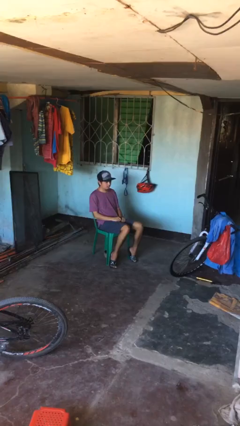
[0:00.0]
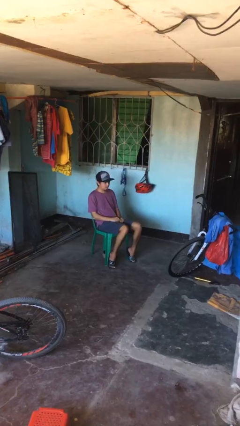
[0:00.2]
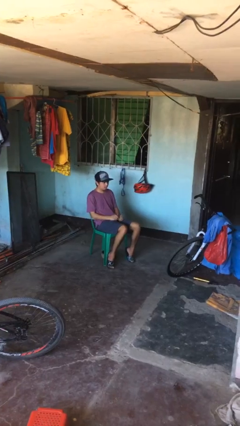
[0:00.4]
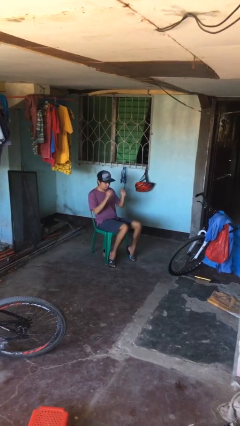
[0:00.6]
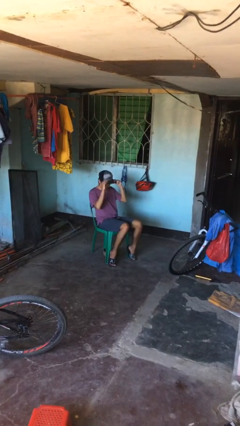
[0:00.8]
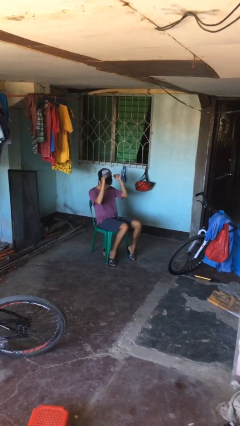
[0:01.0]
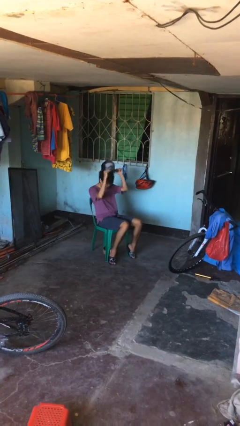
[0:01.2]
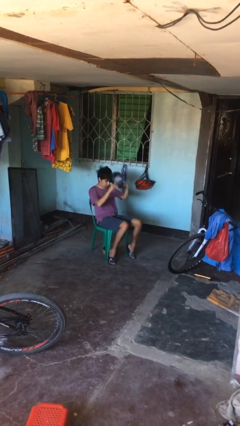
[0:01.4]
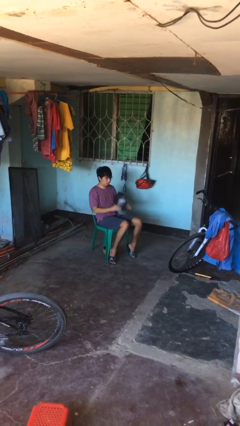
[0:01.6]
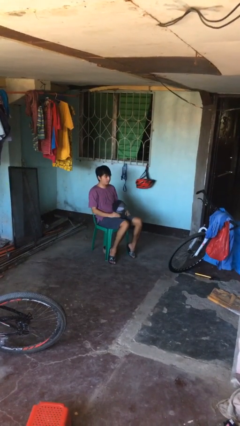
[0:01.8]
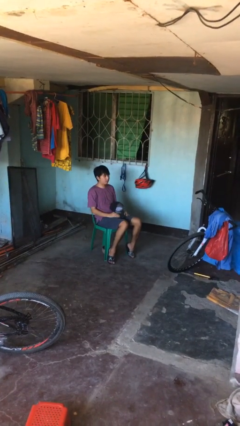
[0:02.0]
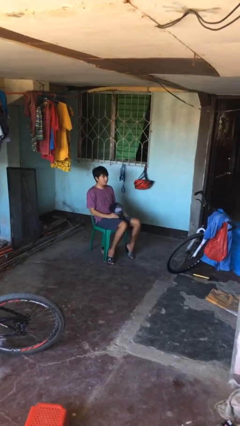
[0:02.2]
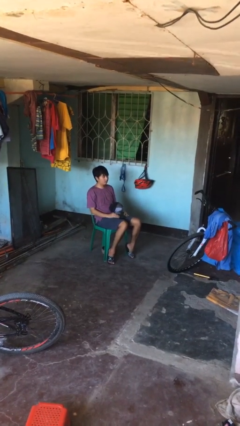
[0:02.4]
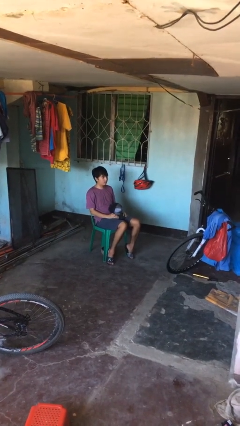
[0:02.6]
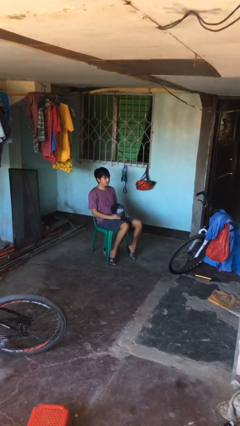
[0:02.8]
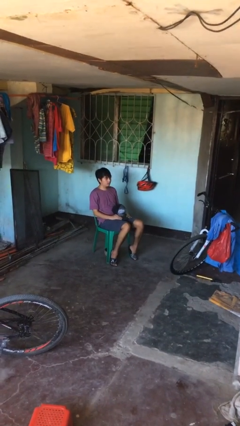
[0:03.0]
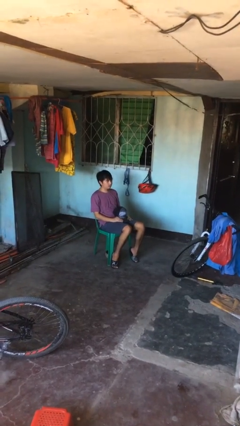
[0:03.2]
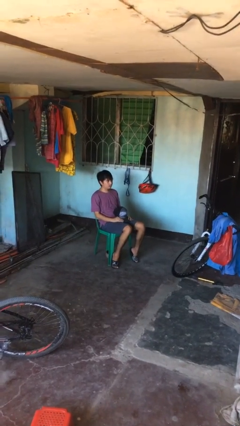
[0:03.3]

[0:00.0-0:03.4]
person takes off hat

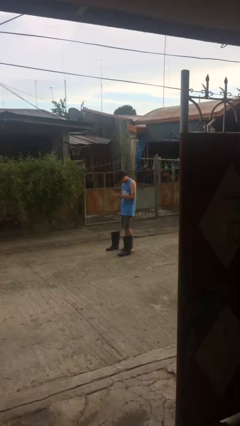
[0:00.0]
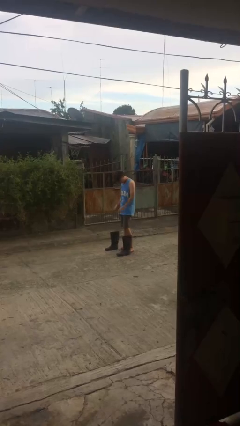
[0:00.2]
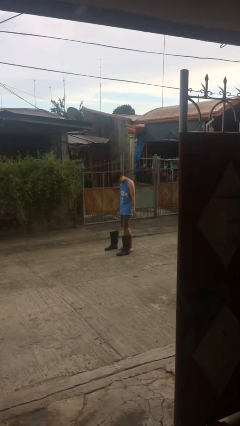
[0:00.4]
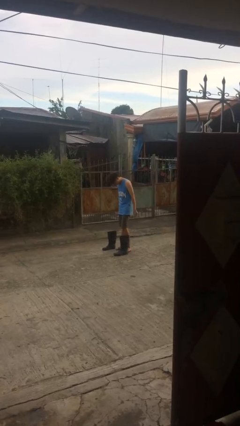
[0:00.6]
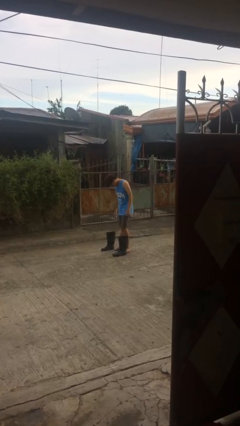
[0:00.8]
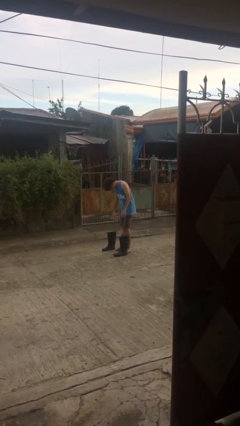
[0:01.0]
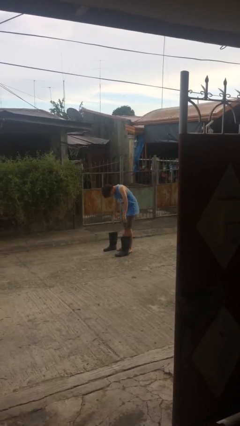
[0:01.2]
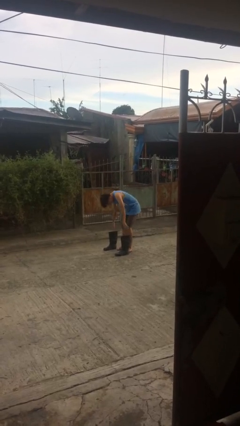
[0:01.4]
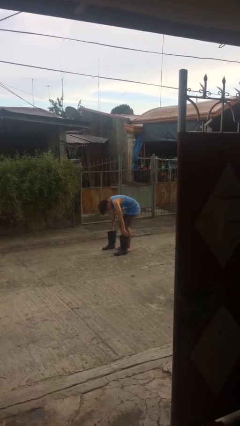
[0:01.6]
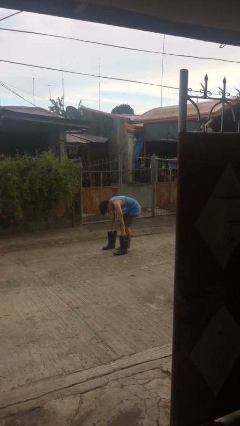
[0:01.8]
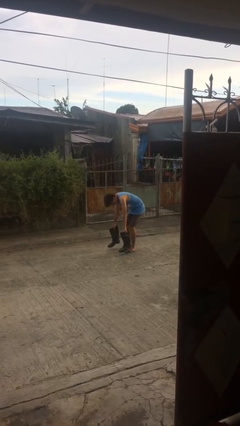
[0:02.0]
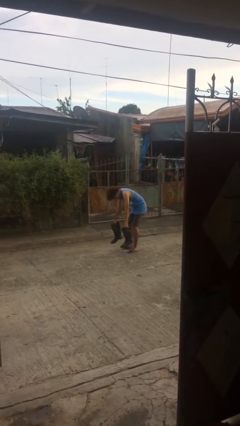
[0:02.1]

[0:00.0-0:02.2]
person picks up object from floor

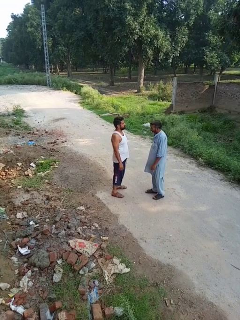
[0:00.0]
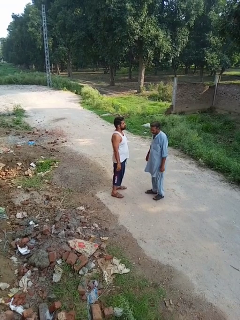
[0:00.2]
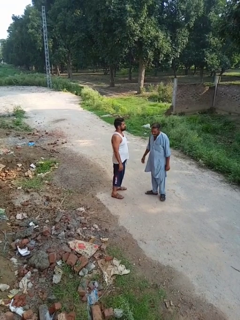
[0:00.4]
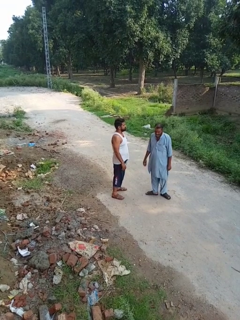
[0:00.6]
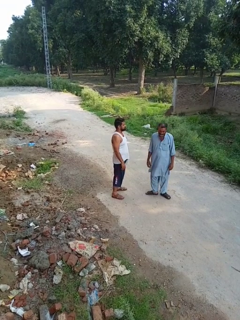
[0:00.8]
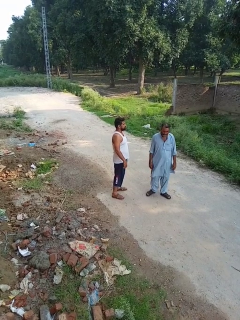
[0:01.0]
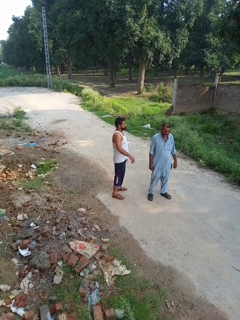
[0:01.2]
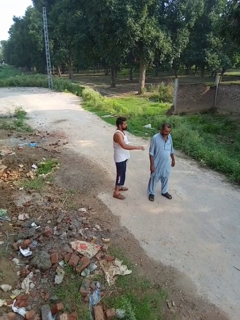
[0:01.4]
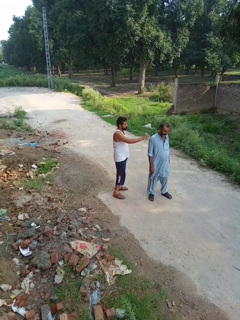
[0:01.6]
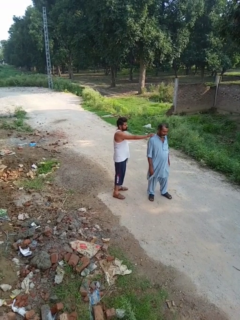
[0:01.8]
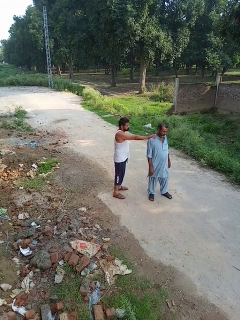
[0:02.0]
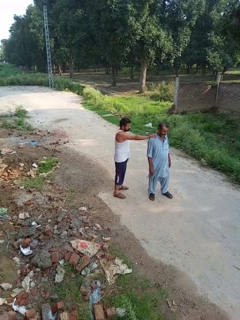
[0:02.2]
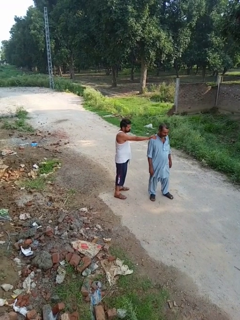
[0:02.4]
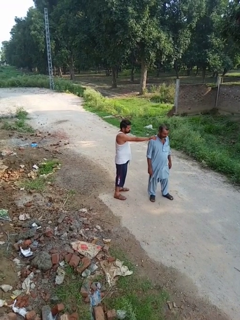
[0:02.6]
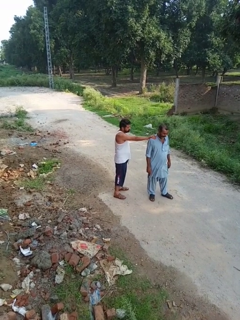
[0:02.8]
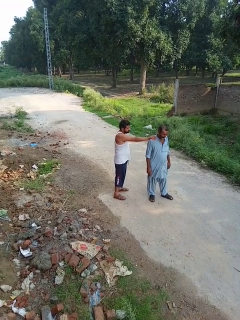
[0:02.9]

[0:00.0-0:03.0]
person grabs person by shoulder

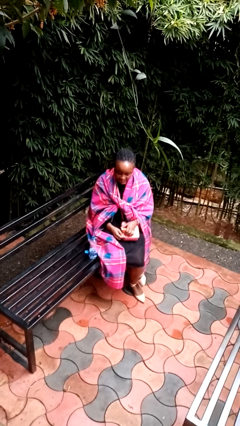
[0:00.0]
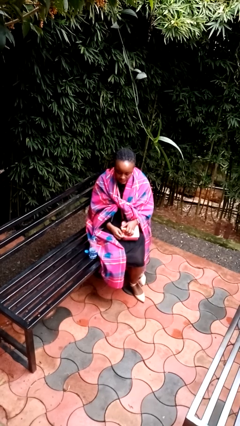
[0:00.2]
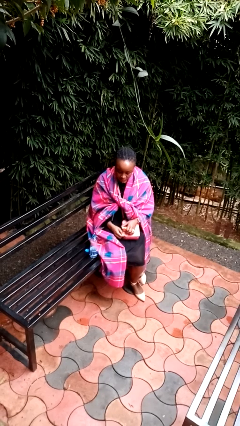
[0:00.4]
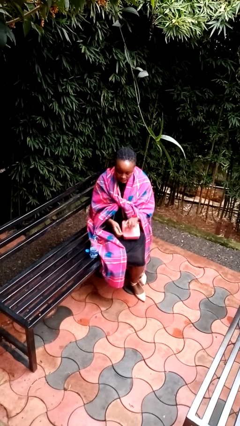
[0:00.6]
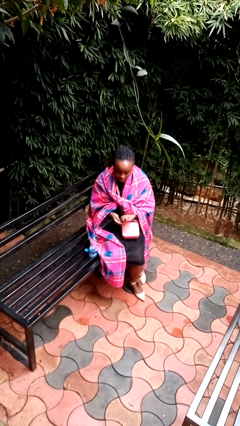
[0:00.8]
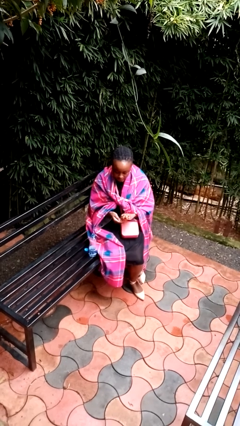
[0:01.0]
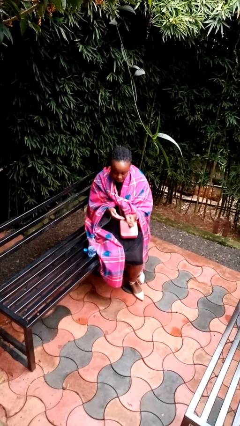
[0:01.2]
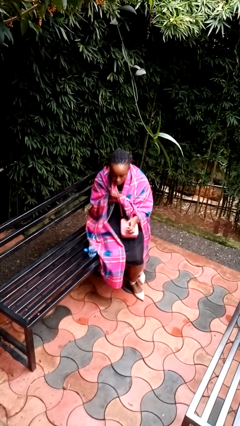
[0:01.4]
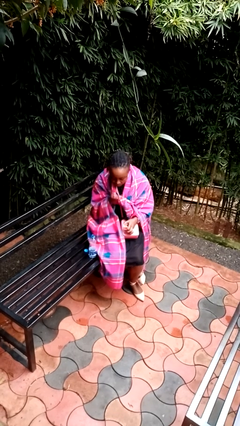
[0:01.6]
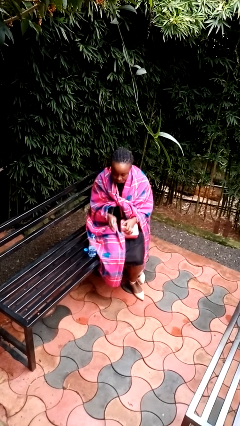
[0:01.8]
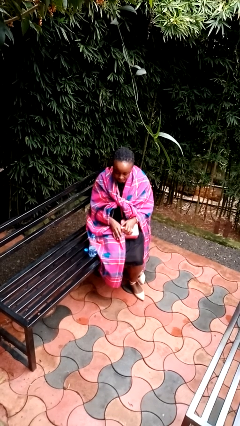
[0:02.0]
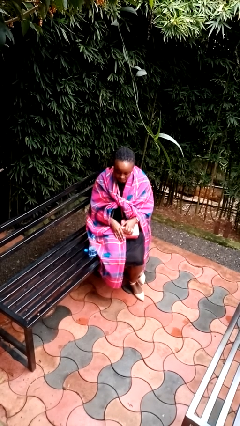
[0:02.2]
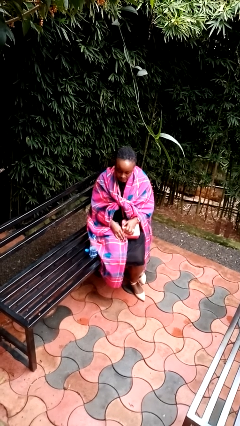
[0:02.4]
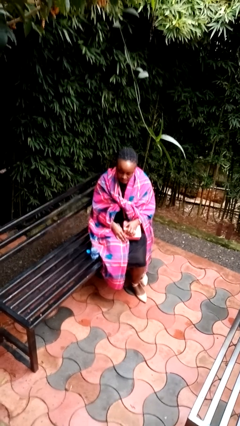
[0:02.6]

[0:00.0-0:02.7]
person takes medicine pills

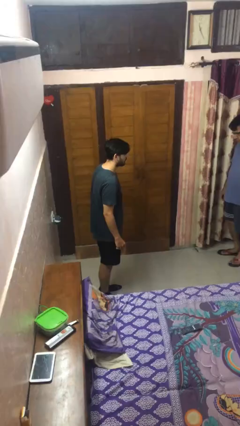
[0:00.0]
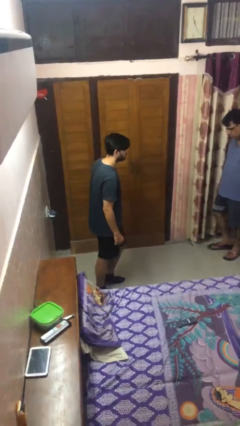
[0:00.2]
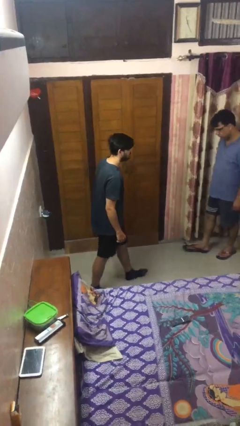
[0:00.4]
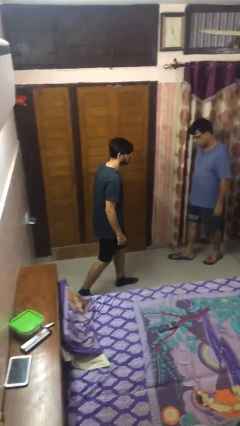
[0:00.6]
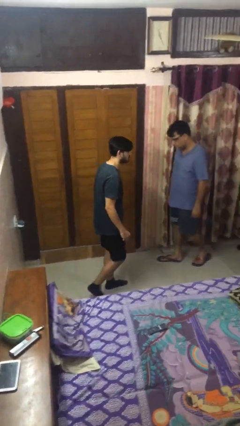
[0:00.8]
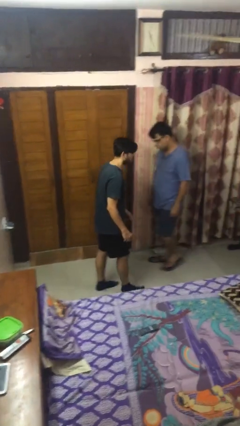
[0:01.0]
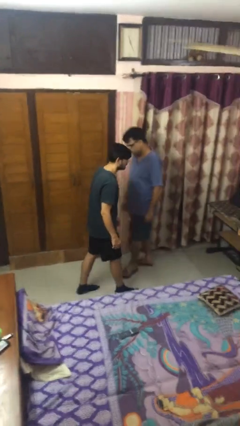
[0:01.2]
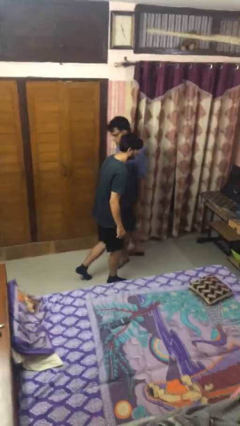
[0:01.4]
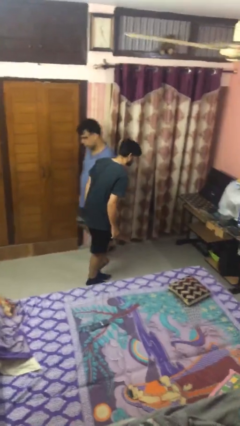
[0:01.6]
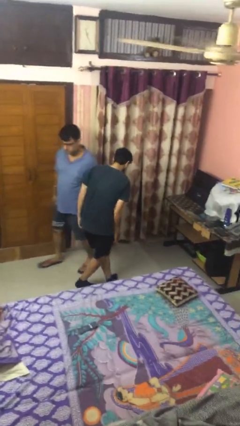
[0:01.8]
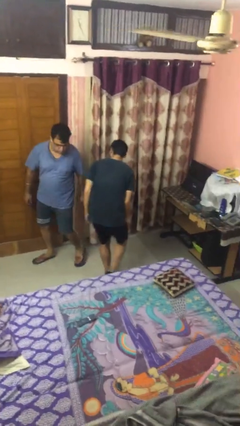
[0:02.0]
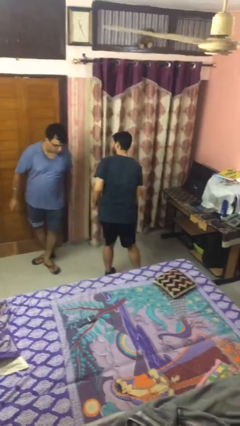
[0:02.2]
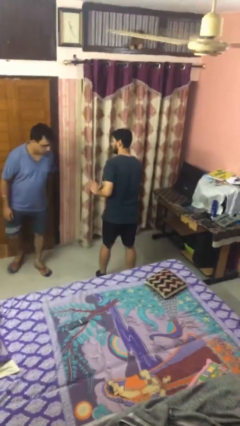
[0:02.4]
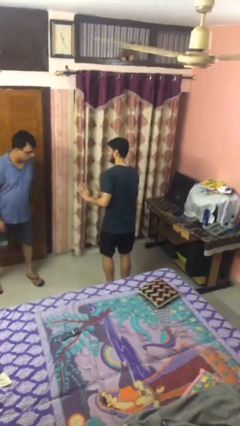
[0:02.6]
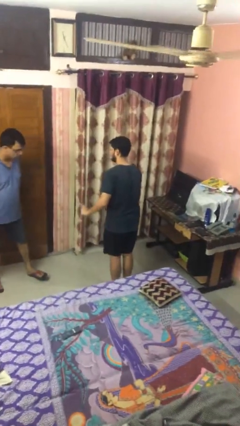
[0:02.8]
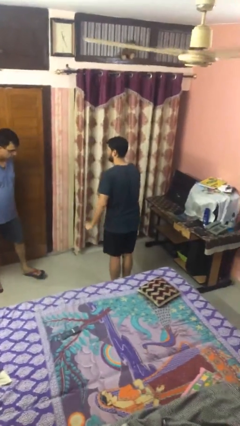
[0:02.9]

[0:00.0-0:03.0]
person bumps into person

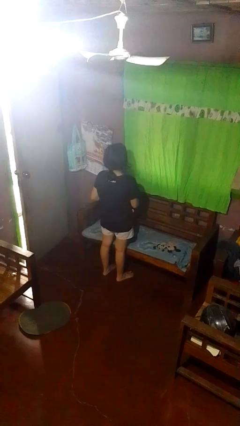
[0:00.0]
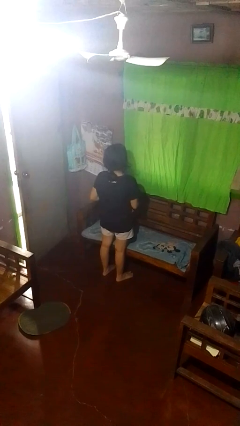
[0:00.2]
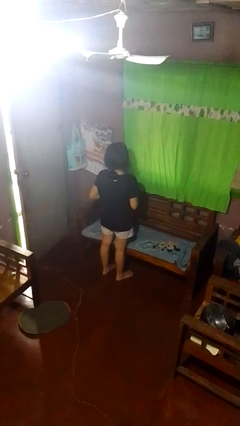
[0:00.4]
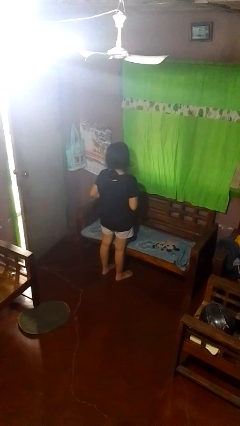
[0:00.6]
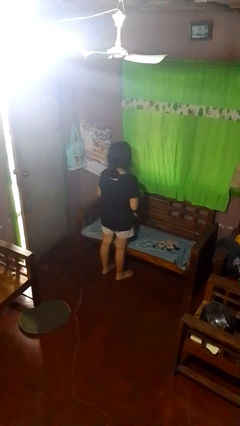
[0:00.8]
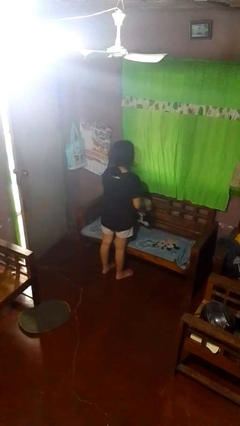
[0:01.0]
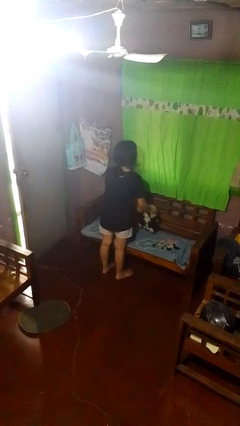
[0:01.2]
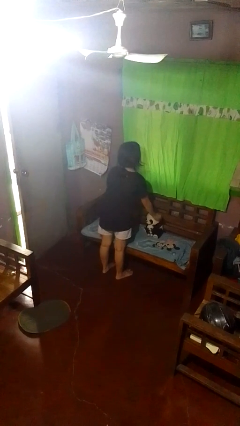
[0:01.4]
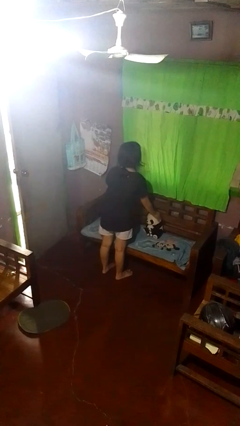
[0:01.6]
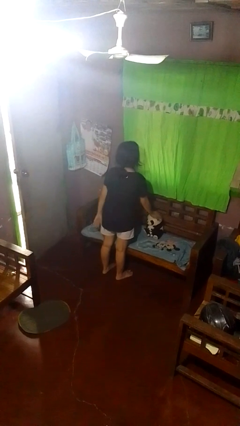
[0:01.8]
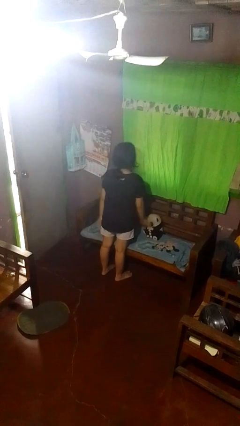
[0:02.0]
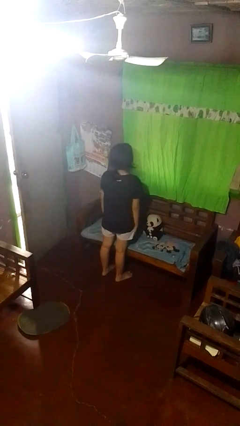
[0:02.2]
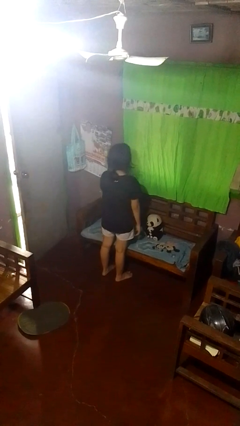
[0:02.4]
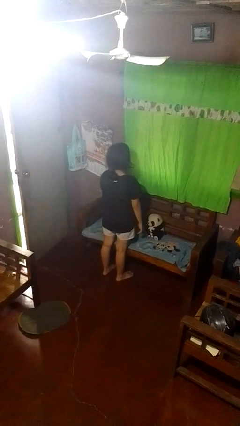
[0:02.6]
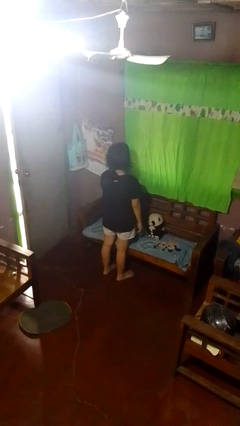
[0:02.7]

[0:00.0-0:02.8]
person puts down object on couch

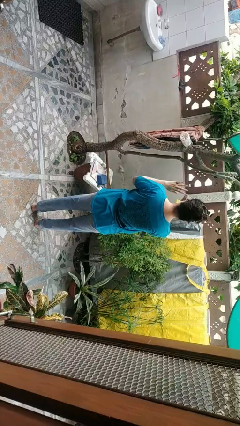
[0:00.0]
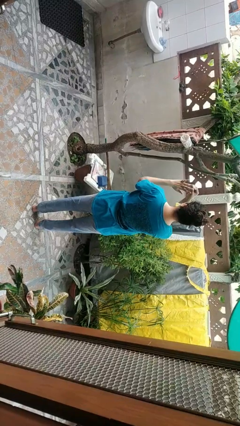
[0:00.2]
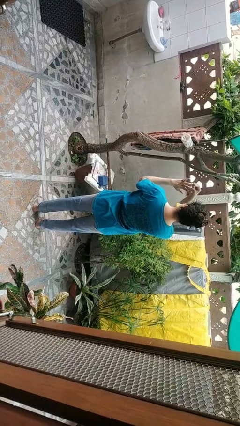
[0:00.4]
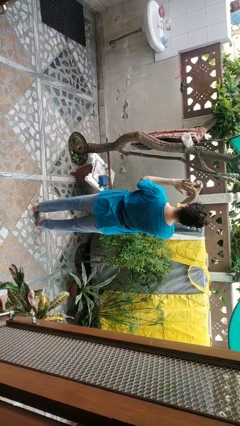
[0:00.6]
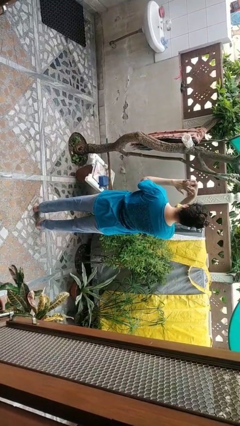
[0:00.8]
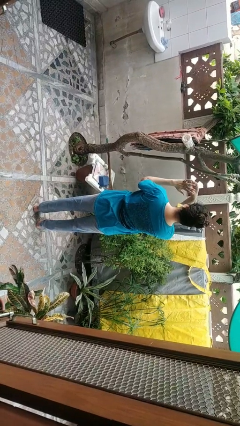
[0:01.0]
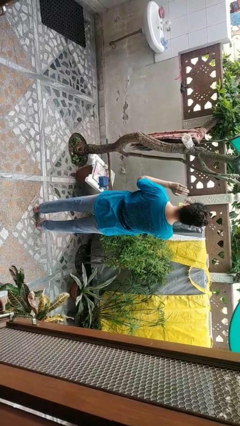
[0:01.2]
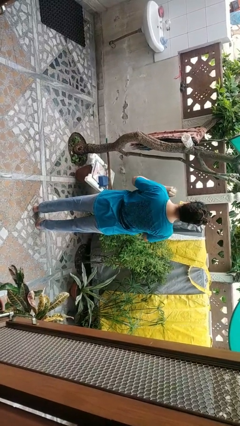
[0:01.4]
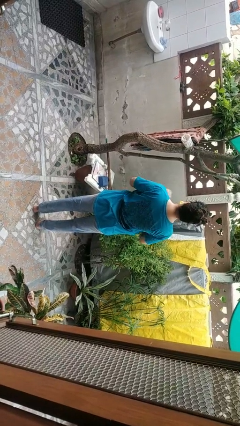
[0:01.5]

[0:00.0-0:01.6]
person puts on ring
